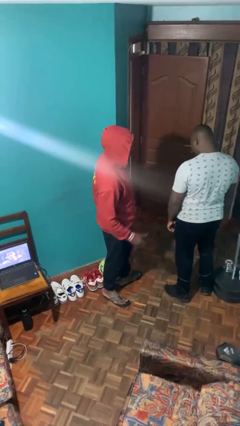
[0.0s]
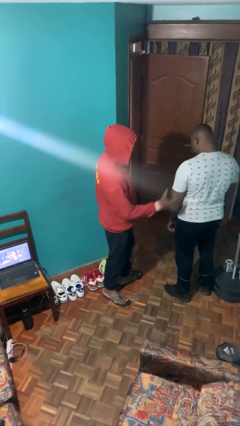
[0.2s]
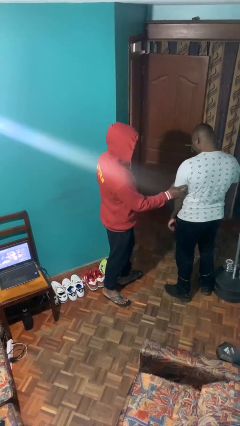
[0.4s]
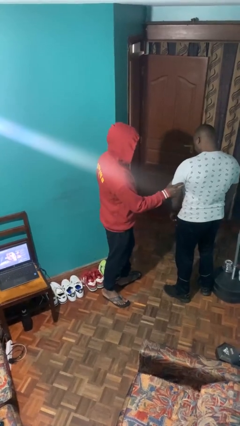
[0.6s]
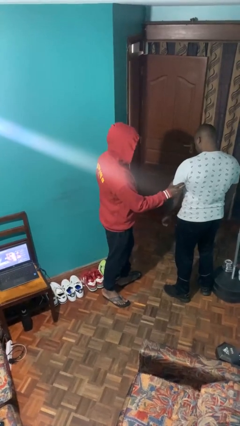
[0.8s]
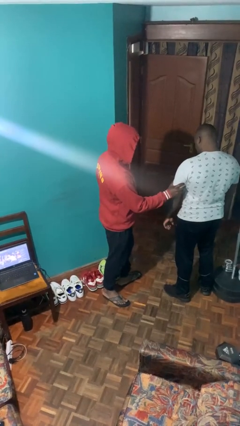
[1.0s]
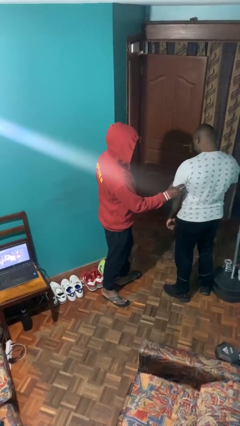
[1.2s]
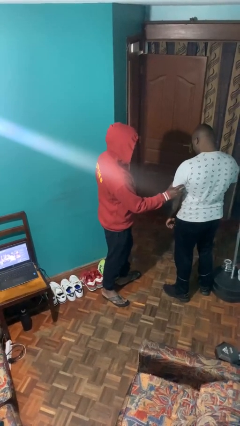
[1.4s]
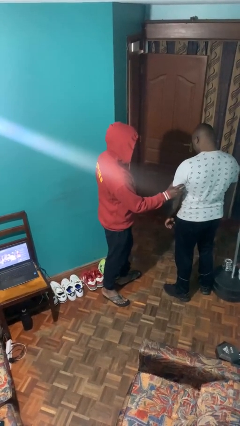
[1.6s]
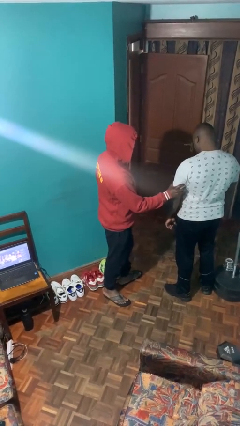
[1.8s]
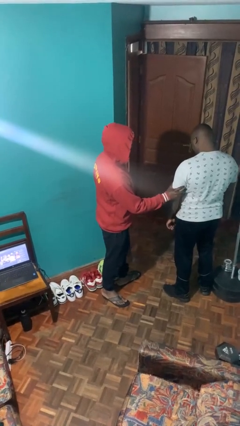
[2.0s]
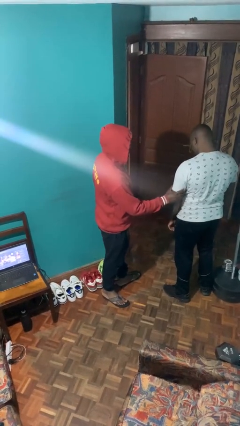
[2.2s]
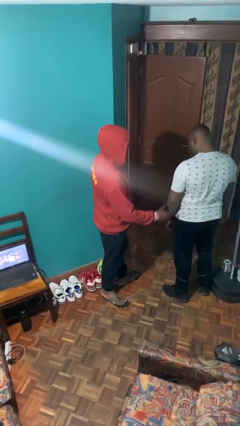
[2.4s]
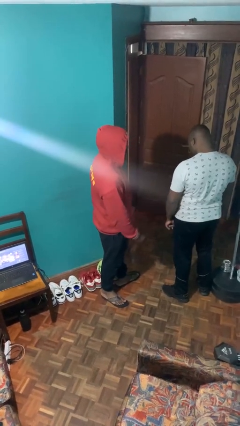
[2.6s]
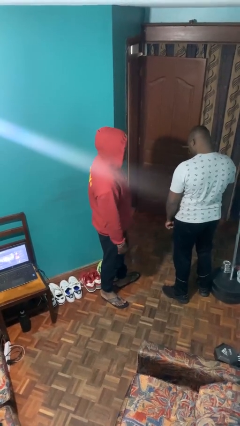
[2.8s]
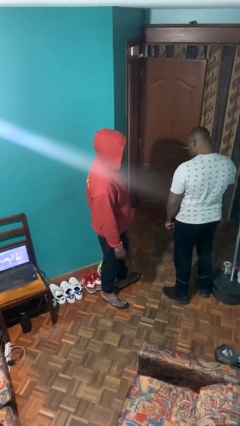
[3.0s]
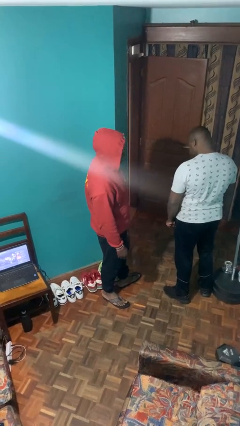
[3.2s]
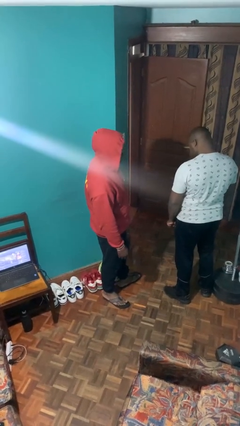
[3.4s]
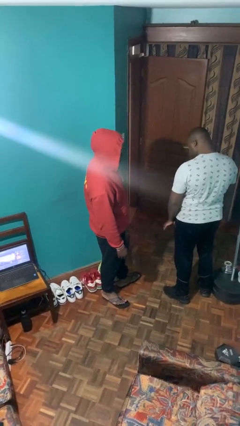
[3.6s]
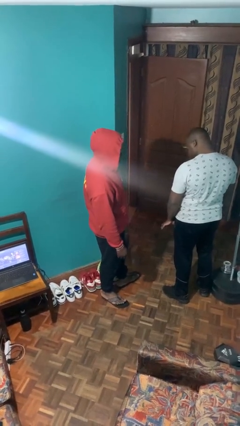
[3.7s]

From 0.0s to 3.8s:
person grabs person by bicep

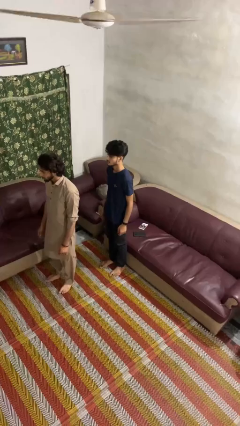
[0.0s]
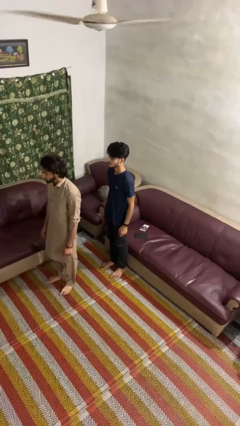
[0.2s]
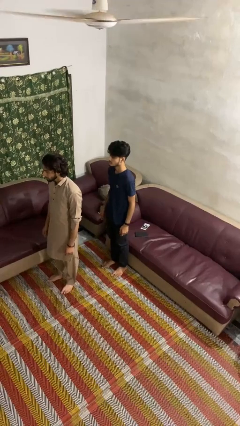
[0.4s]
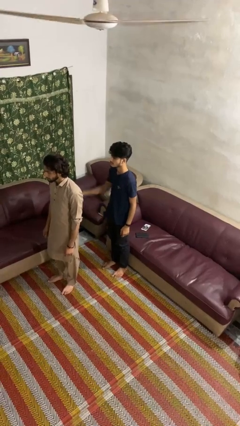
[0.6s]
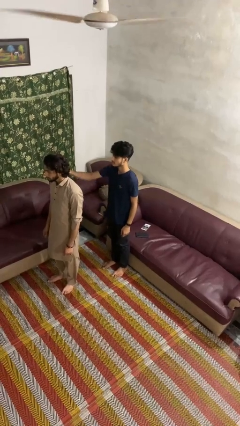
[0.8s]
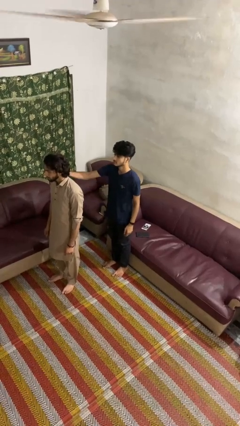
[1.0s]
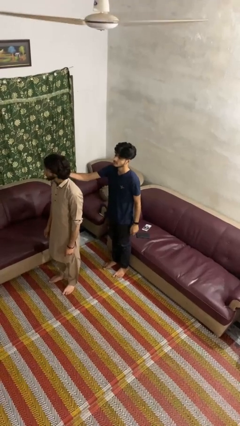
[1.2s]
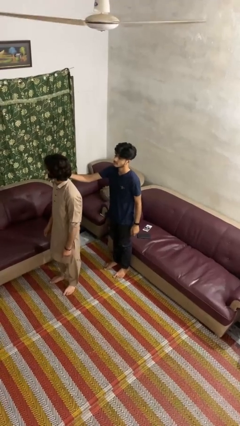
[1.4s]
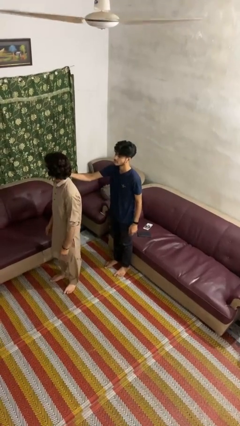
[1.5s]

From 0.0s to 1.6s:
person grabs person by shoulder

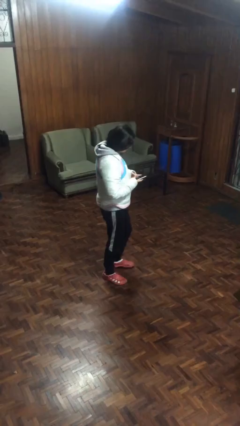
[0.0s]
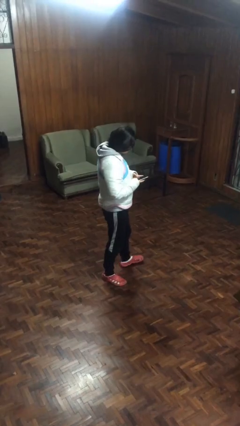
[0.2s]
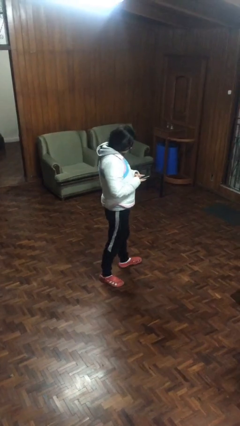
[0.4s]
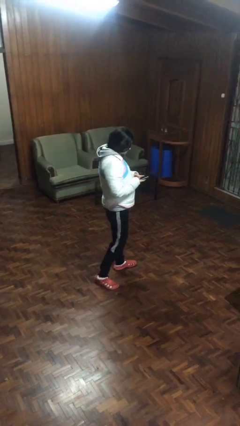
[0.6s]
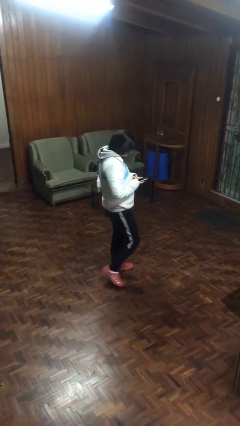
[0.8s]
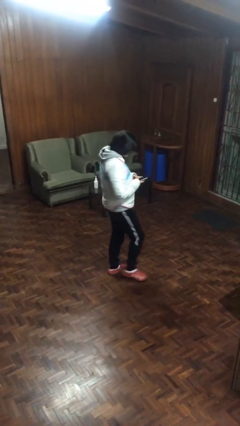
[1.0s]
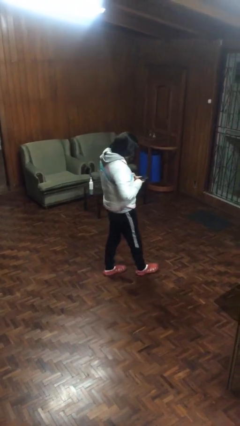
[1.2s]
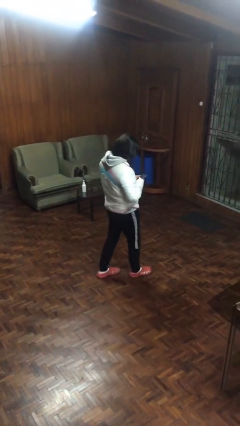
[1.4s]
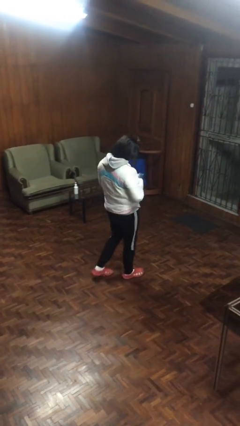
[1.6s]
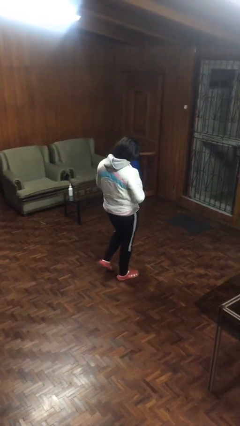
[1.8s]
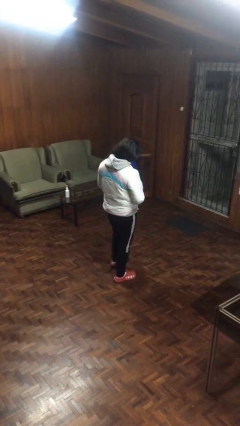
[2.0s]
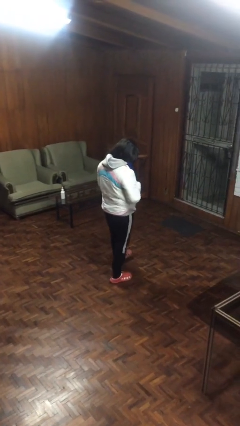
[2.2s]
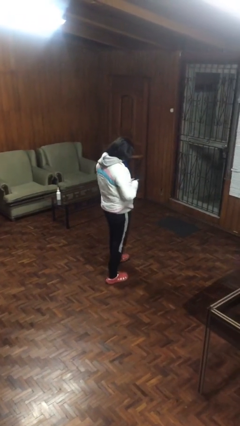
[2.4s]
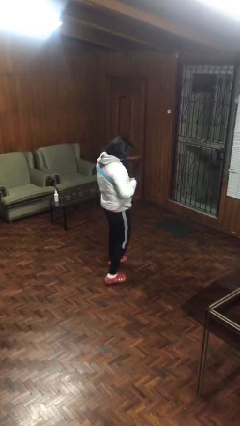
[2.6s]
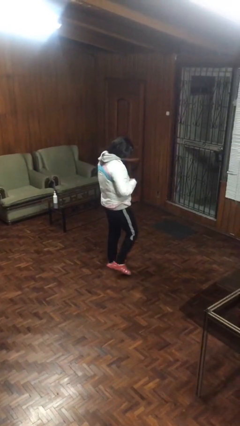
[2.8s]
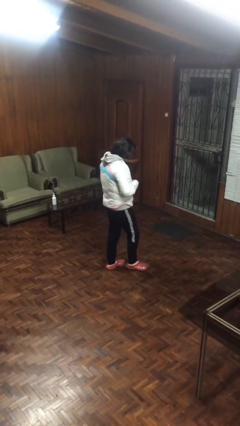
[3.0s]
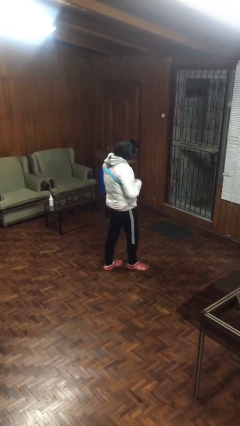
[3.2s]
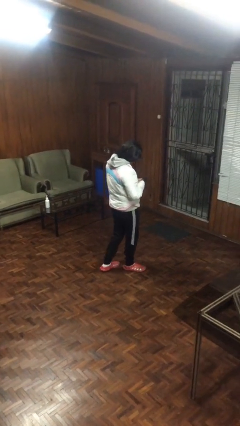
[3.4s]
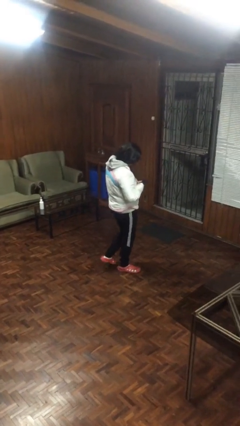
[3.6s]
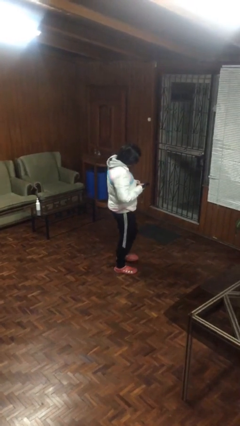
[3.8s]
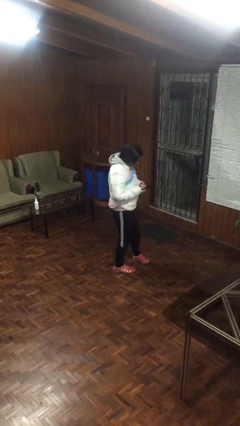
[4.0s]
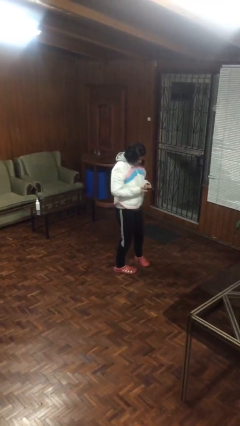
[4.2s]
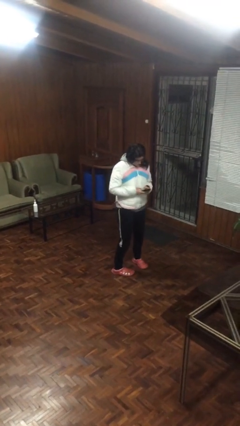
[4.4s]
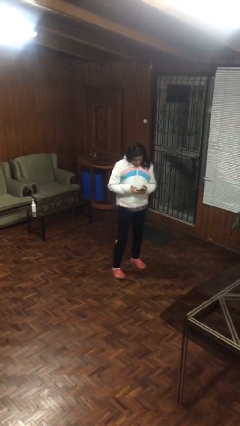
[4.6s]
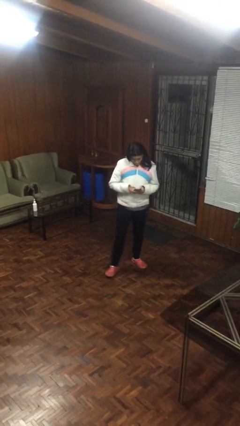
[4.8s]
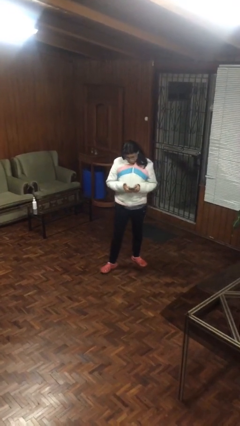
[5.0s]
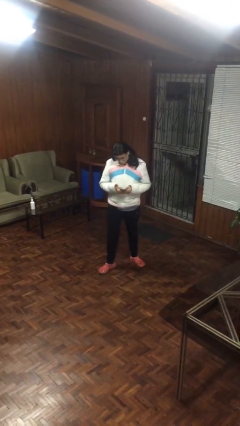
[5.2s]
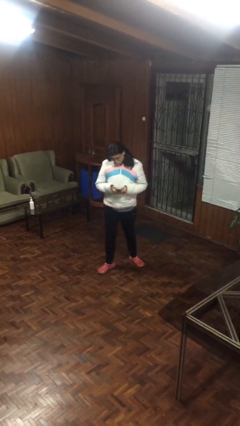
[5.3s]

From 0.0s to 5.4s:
person texts on phone

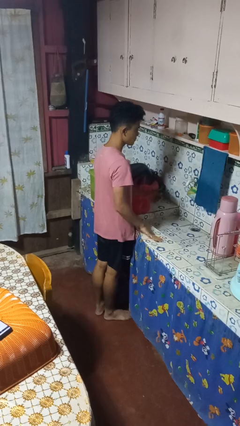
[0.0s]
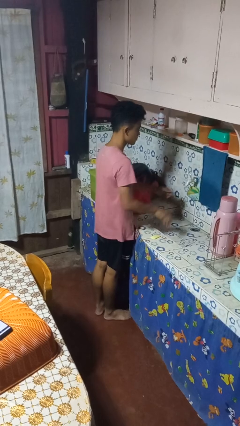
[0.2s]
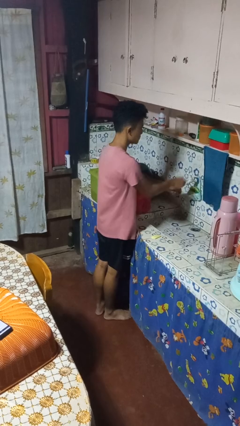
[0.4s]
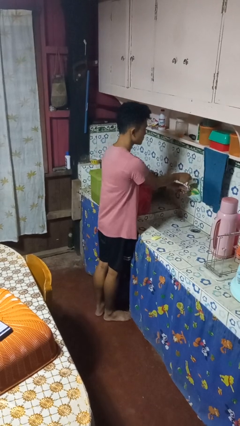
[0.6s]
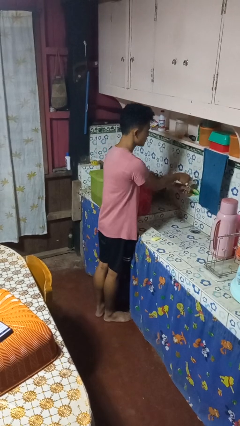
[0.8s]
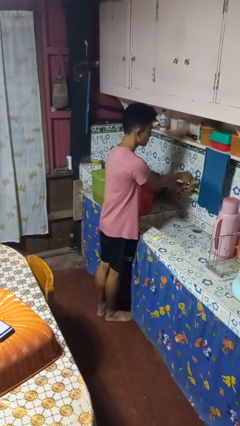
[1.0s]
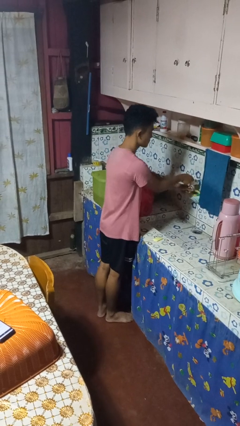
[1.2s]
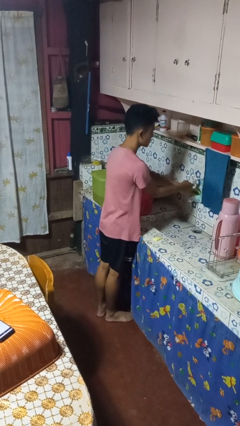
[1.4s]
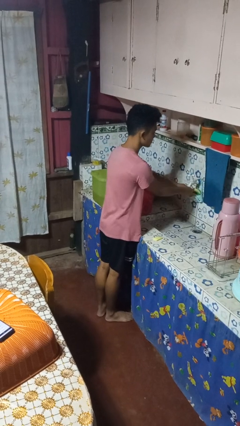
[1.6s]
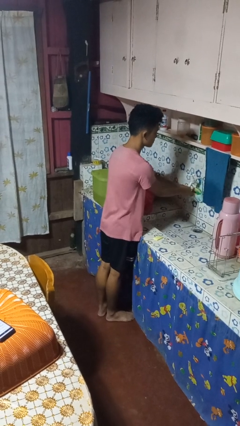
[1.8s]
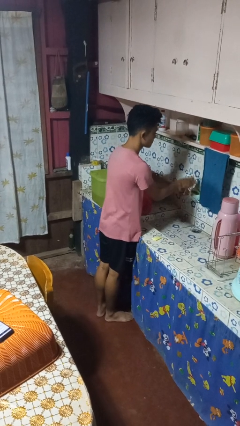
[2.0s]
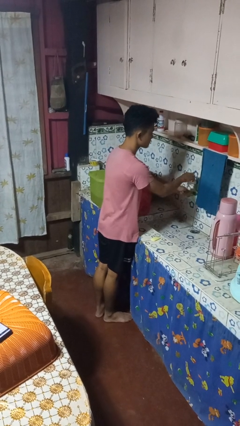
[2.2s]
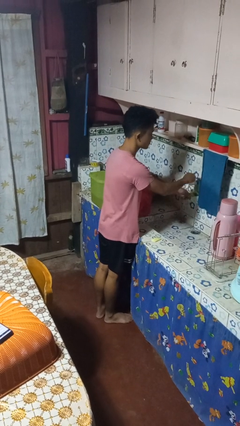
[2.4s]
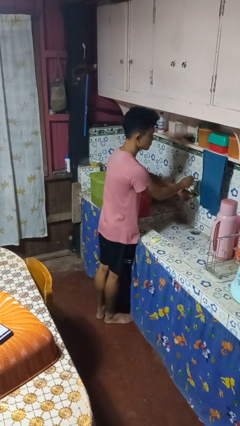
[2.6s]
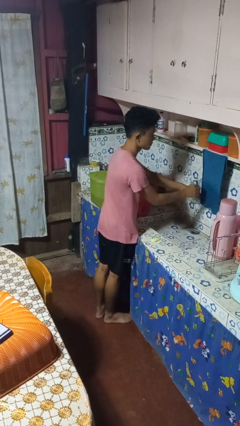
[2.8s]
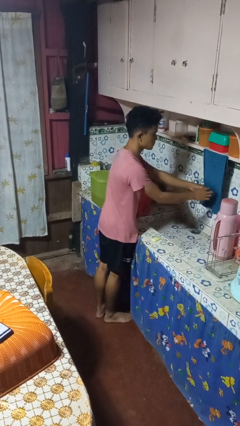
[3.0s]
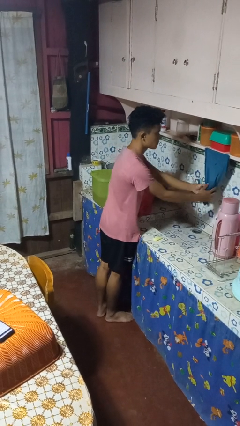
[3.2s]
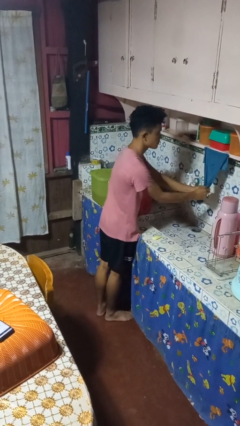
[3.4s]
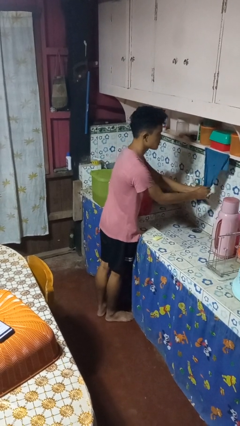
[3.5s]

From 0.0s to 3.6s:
person washes hands

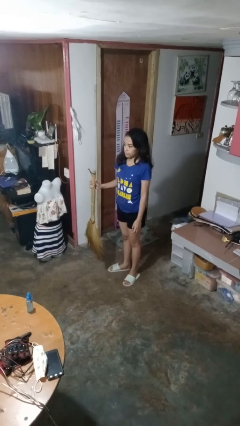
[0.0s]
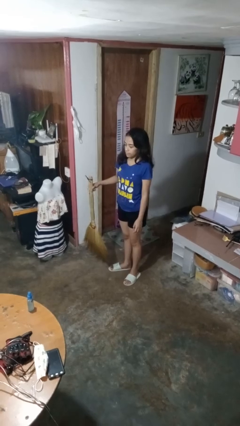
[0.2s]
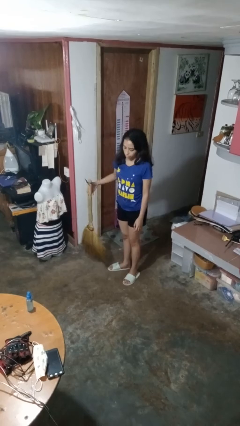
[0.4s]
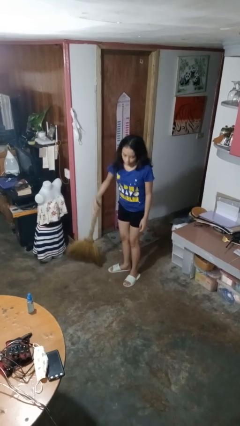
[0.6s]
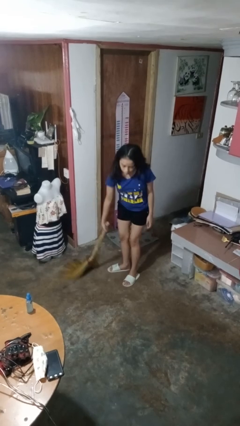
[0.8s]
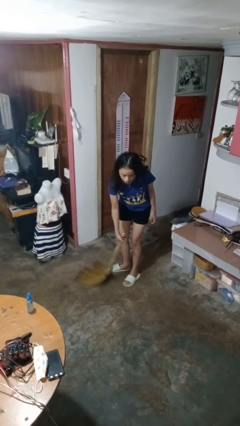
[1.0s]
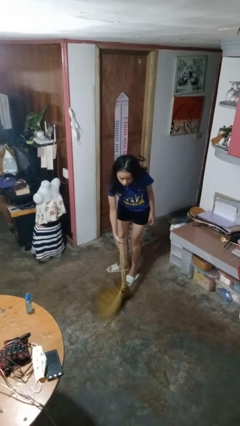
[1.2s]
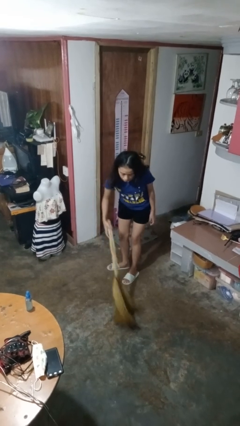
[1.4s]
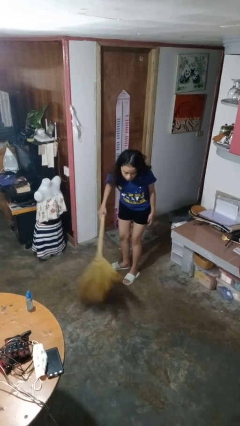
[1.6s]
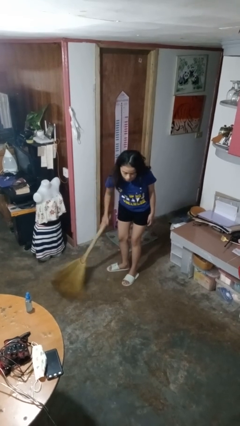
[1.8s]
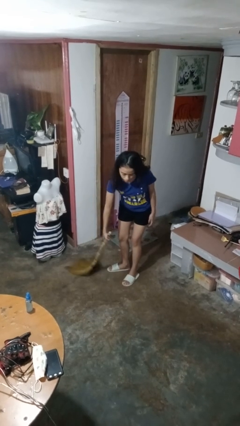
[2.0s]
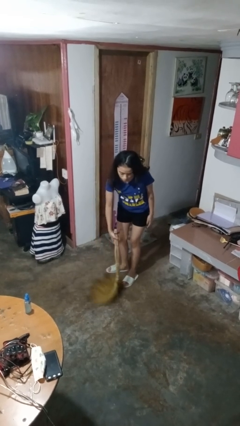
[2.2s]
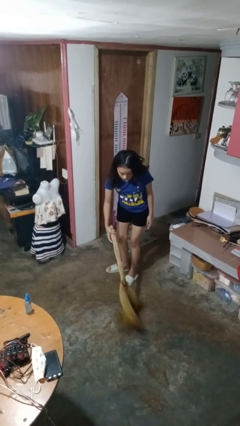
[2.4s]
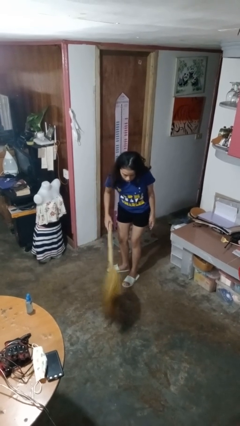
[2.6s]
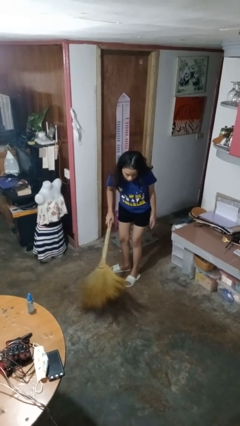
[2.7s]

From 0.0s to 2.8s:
person sweeps floor

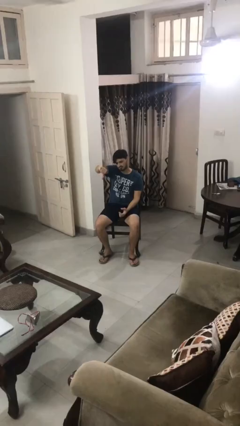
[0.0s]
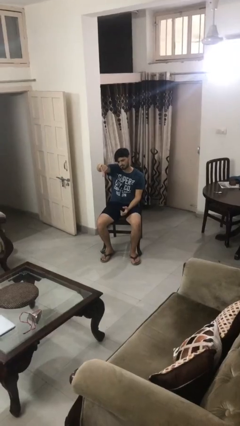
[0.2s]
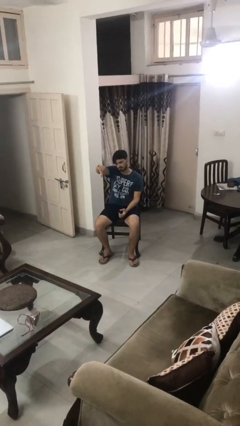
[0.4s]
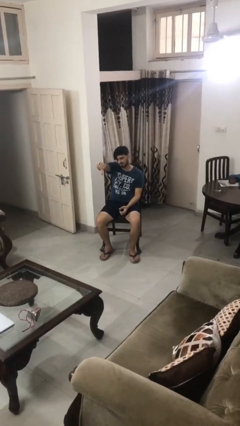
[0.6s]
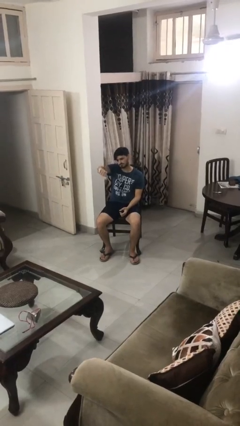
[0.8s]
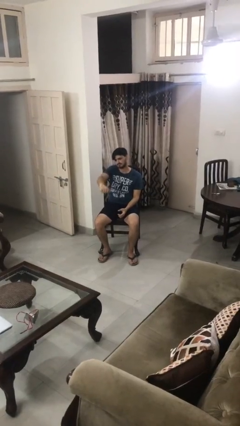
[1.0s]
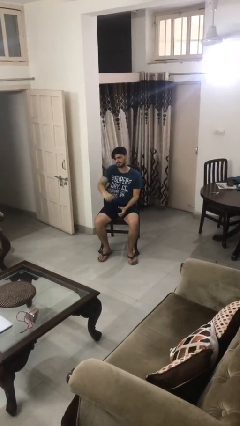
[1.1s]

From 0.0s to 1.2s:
person gestures thumbs down
